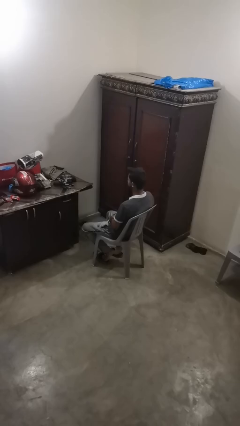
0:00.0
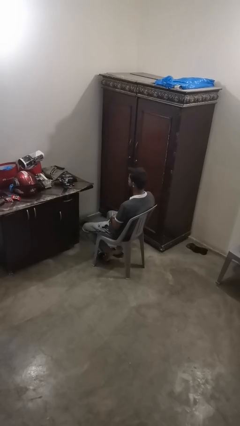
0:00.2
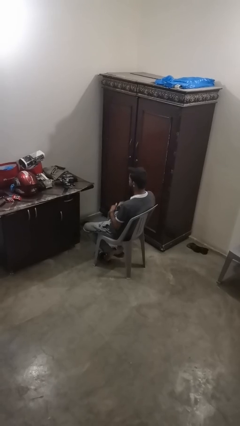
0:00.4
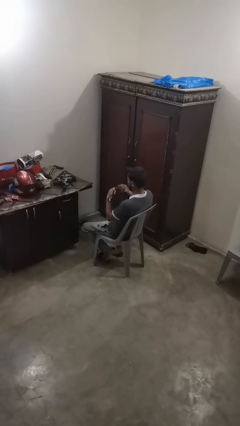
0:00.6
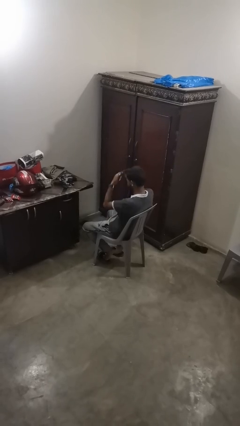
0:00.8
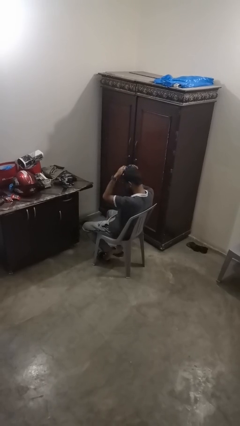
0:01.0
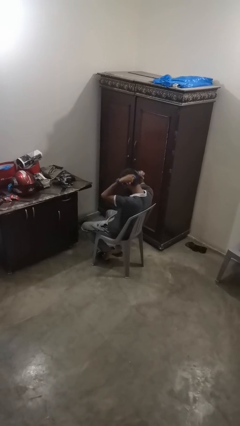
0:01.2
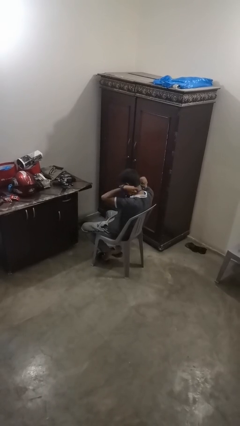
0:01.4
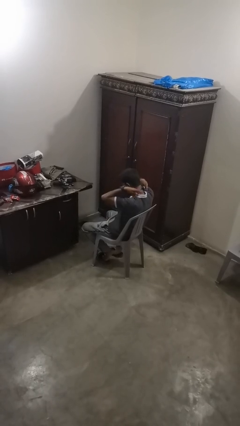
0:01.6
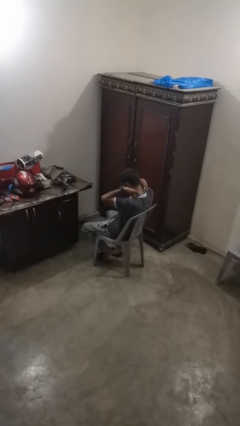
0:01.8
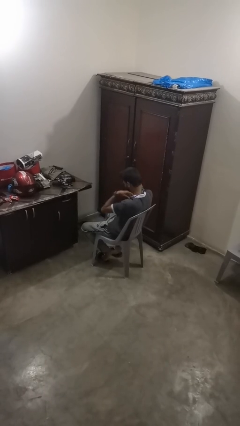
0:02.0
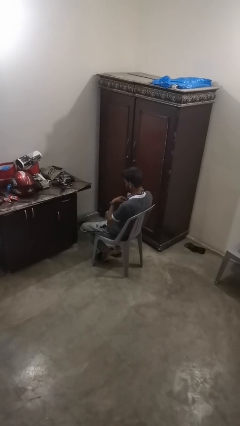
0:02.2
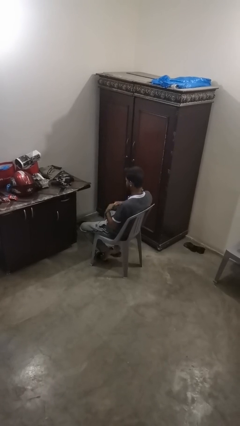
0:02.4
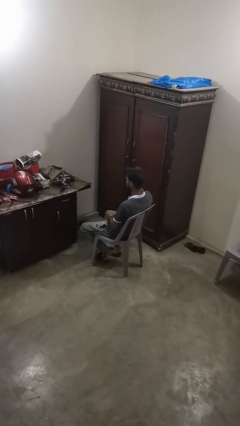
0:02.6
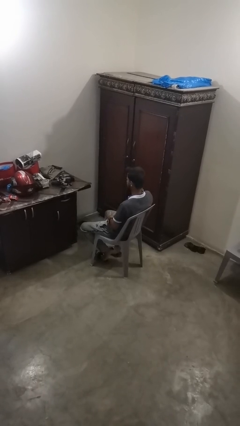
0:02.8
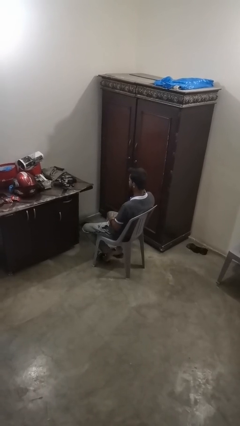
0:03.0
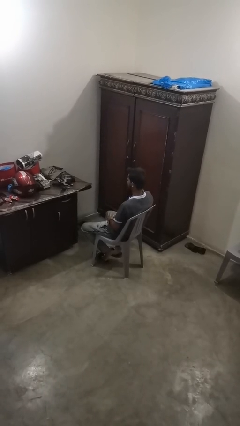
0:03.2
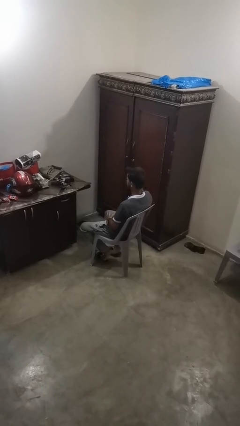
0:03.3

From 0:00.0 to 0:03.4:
person puts on necklace

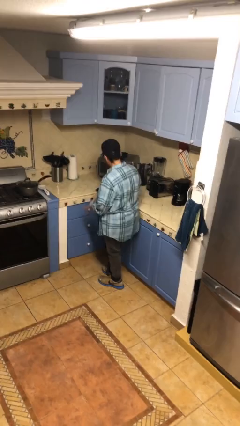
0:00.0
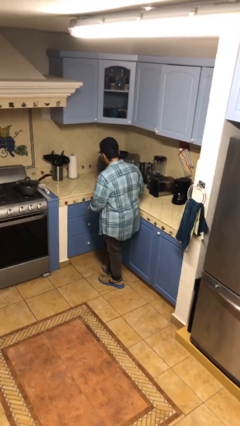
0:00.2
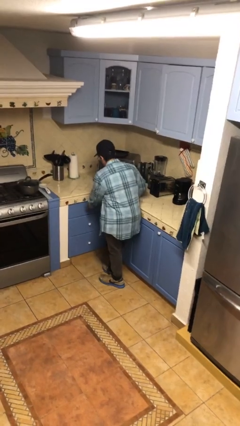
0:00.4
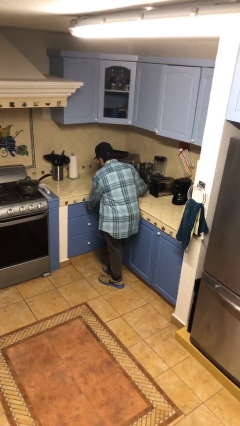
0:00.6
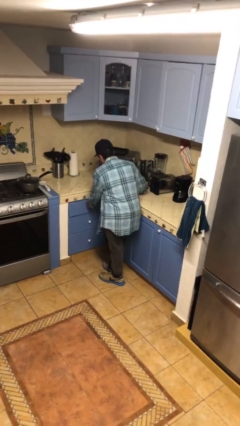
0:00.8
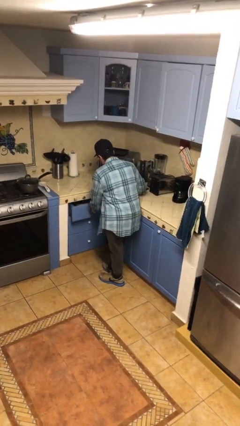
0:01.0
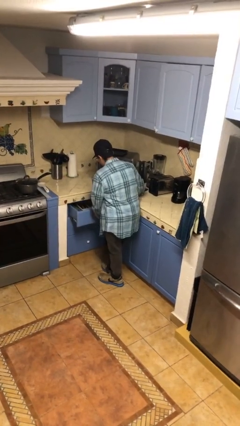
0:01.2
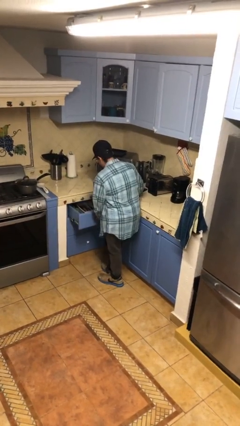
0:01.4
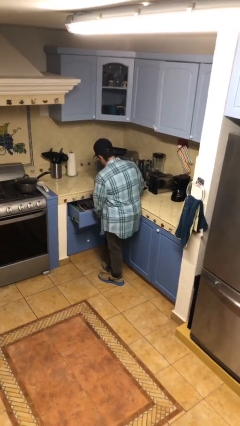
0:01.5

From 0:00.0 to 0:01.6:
person opens kitchen drawer

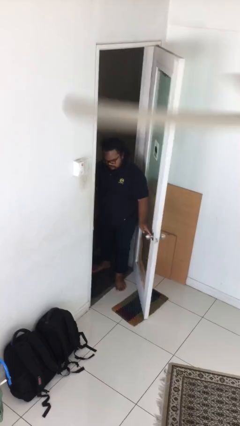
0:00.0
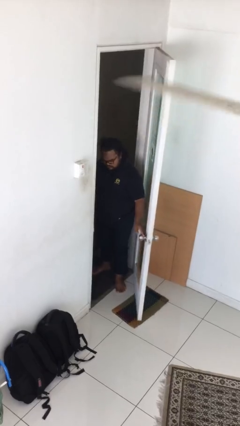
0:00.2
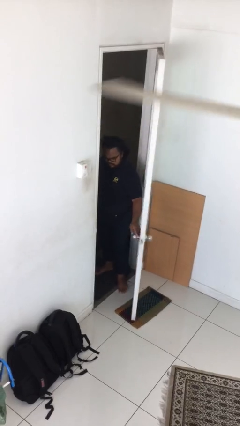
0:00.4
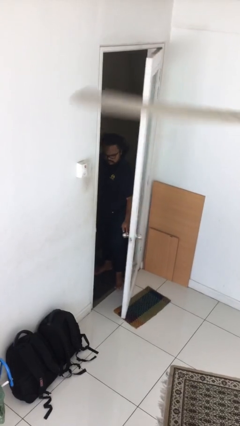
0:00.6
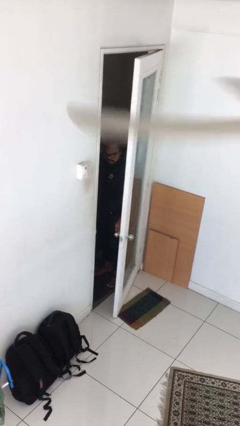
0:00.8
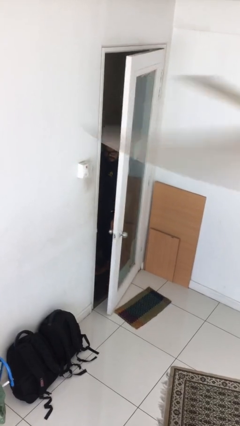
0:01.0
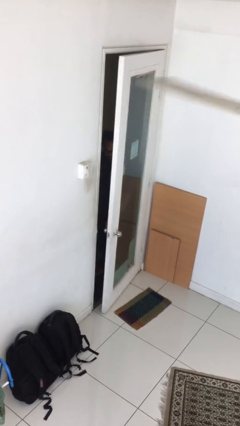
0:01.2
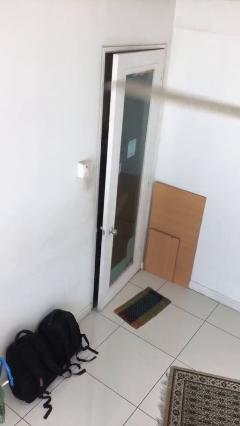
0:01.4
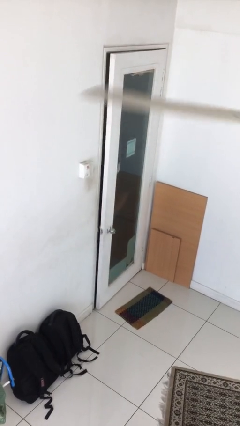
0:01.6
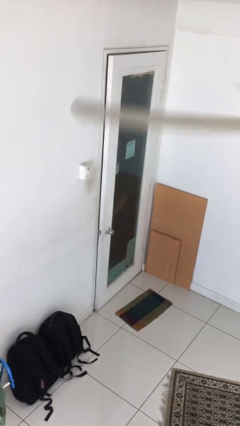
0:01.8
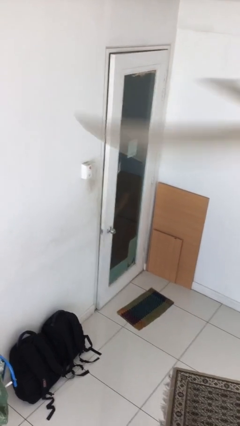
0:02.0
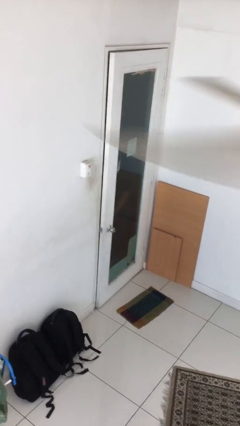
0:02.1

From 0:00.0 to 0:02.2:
person closes facility door

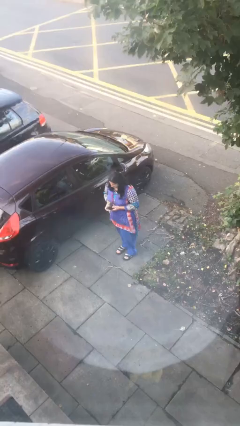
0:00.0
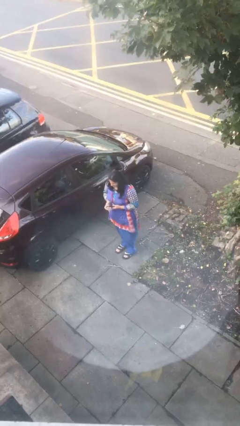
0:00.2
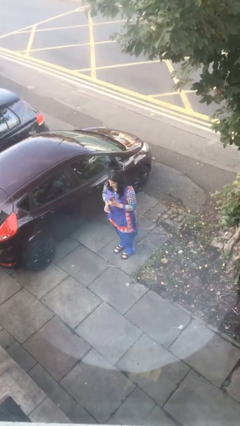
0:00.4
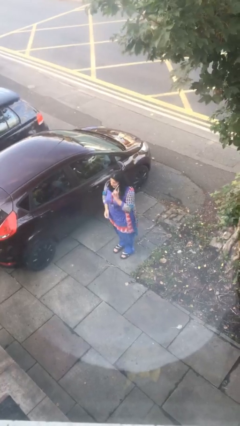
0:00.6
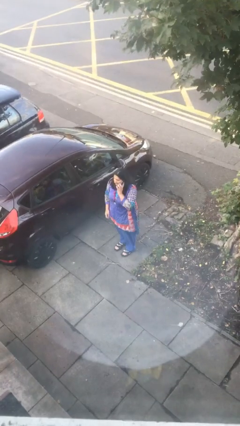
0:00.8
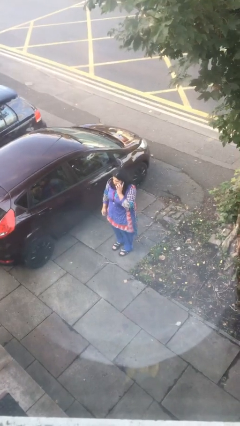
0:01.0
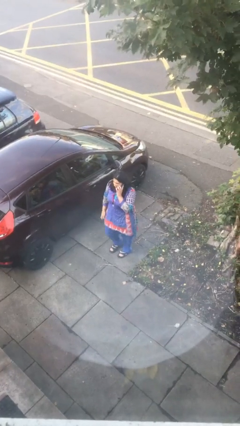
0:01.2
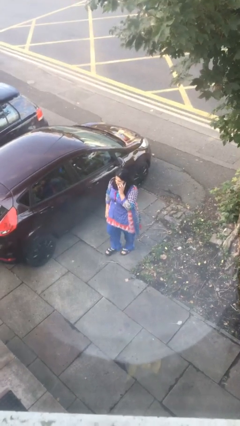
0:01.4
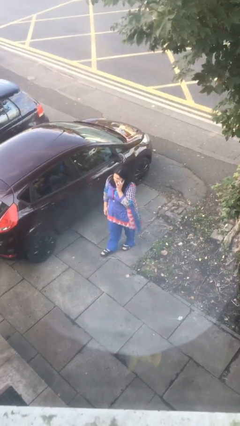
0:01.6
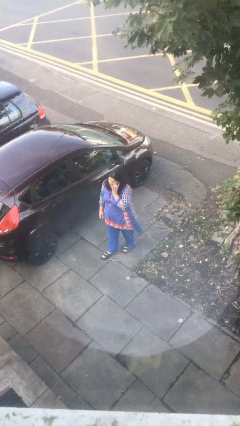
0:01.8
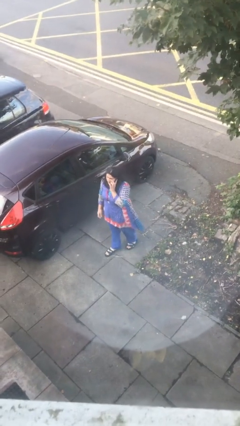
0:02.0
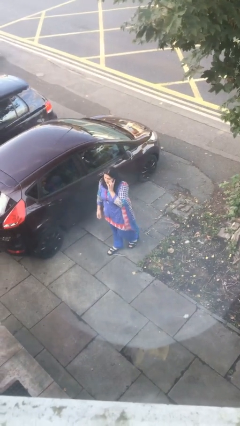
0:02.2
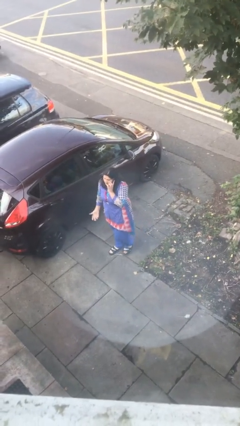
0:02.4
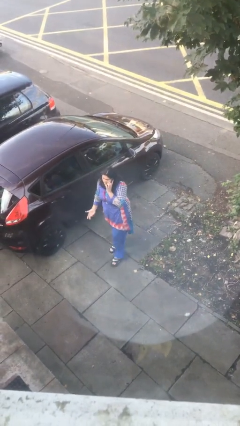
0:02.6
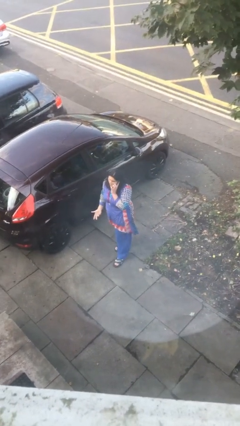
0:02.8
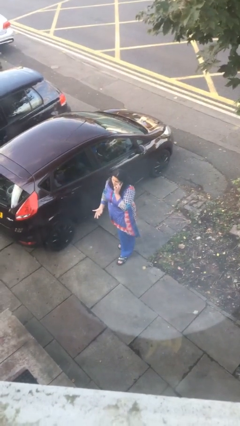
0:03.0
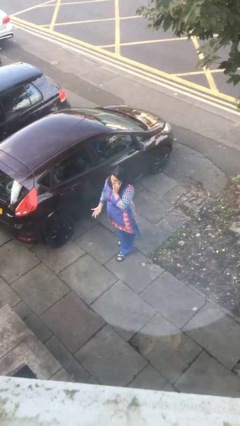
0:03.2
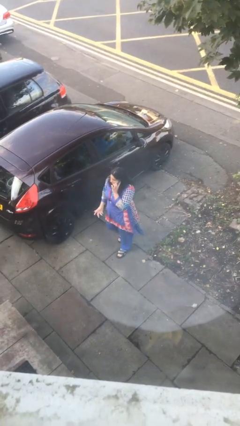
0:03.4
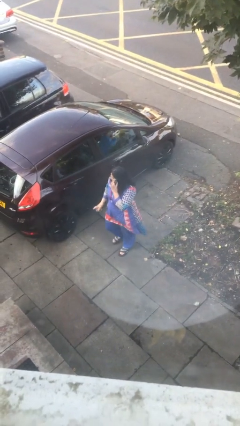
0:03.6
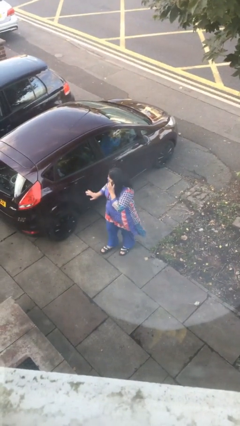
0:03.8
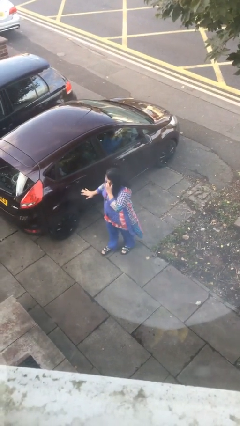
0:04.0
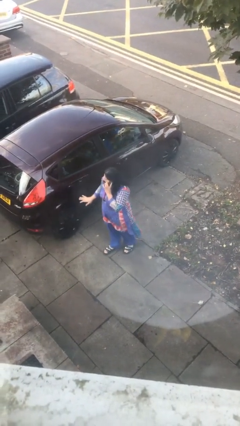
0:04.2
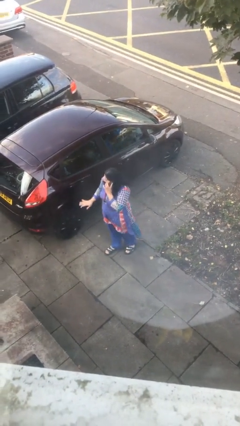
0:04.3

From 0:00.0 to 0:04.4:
person talks on phone

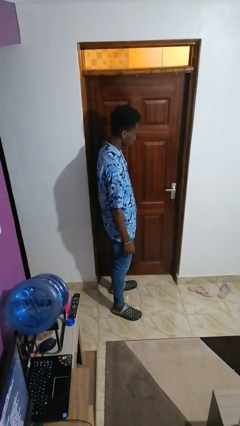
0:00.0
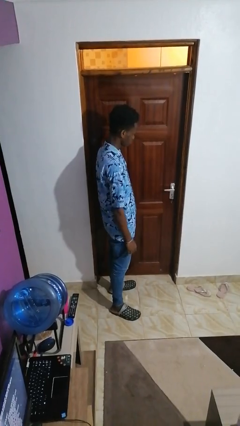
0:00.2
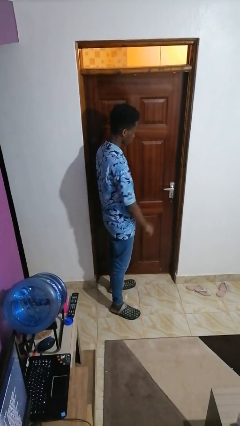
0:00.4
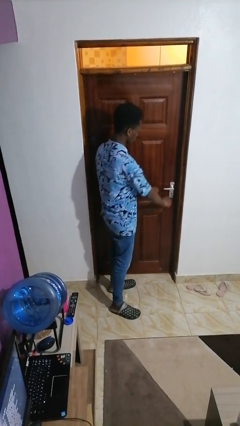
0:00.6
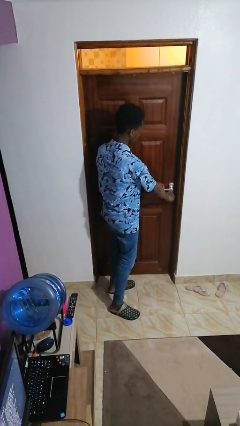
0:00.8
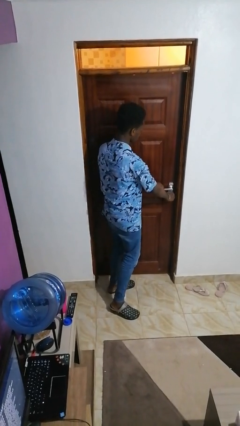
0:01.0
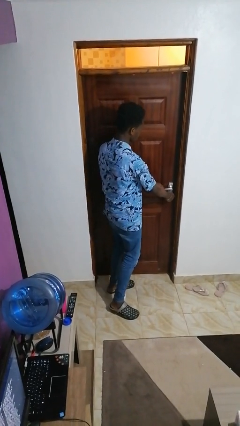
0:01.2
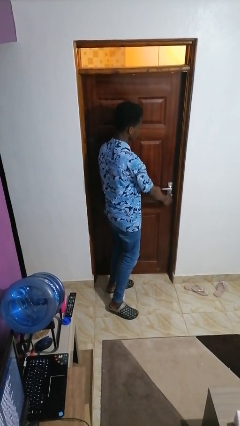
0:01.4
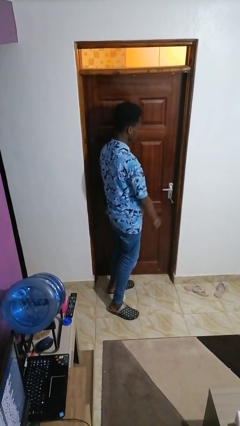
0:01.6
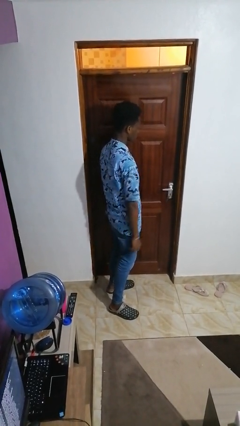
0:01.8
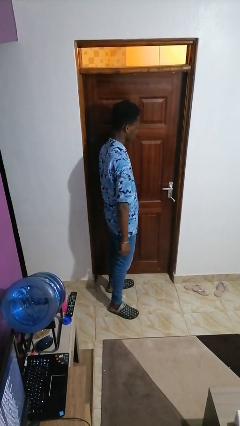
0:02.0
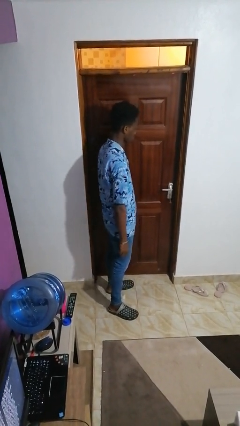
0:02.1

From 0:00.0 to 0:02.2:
person locks door with keys

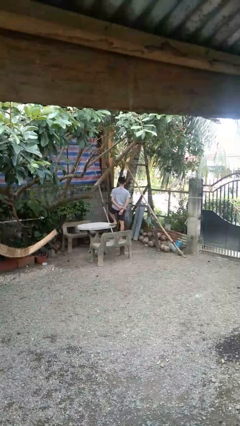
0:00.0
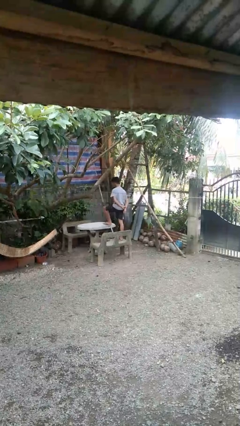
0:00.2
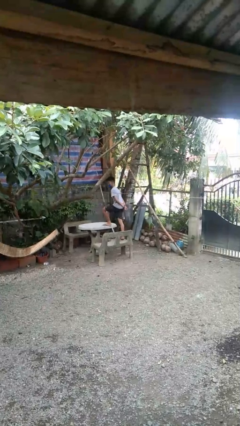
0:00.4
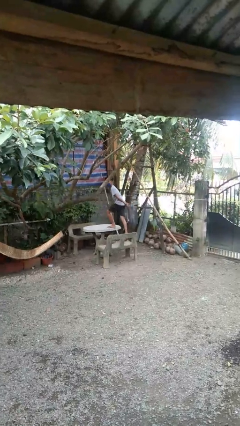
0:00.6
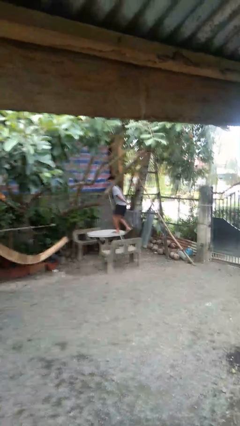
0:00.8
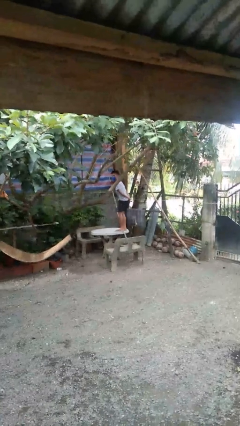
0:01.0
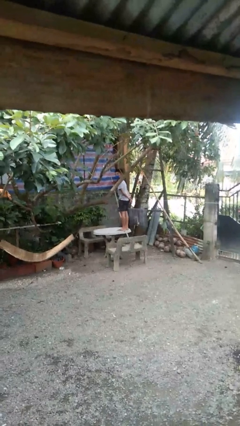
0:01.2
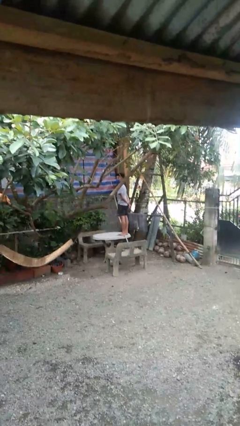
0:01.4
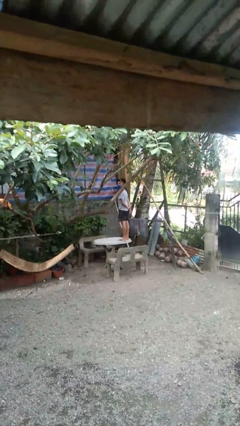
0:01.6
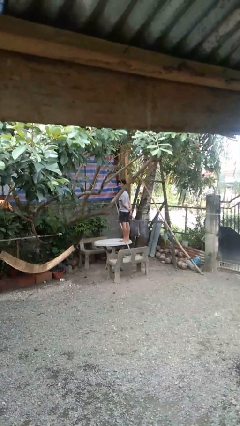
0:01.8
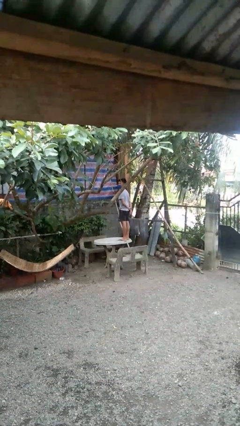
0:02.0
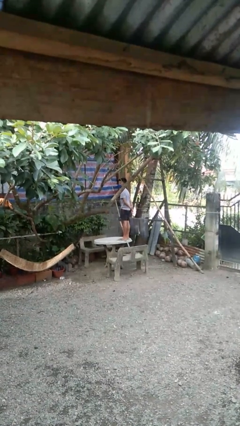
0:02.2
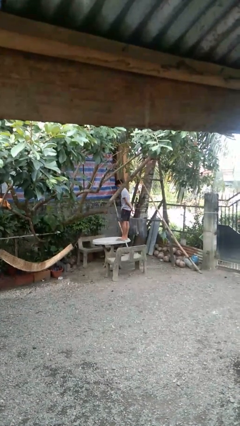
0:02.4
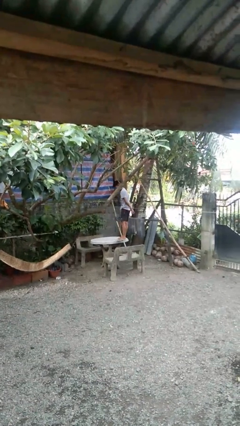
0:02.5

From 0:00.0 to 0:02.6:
person climbs on table

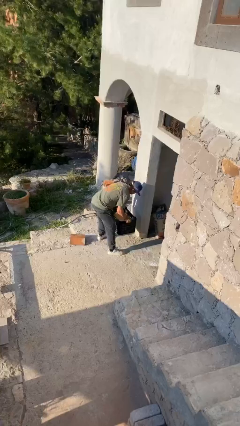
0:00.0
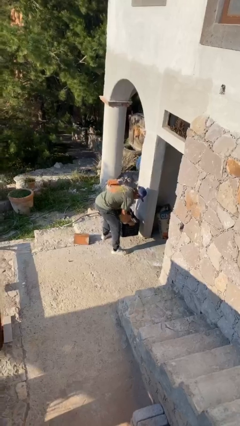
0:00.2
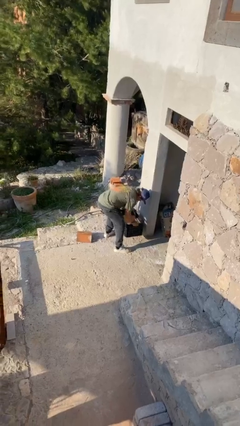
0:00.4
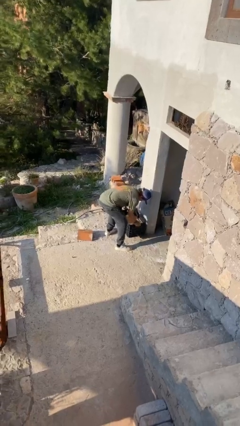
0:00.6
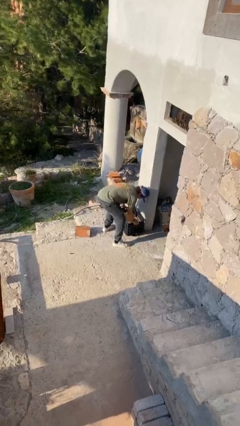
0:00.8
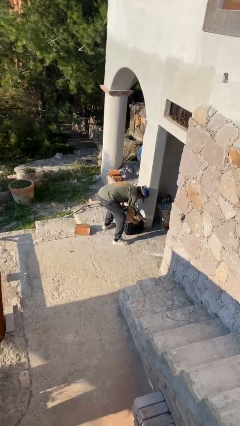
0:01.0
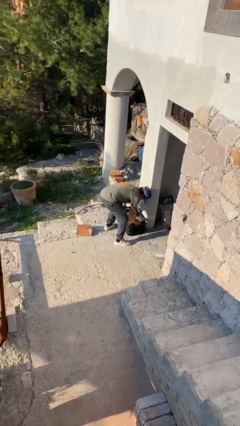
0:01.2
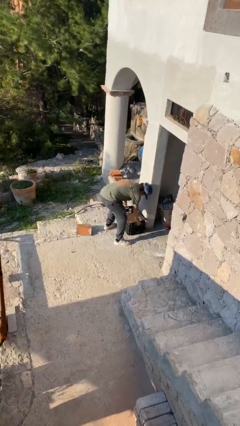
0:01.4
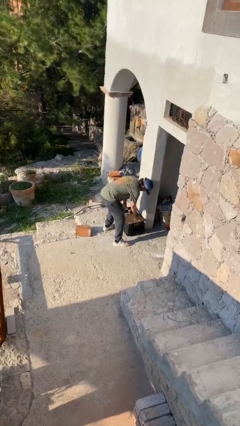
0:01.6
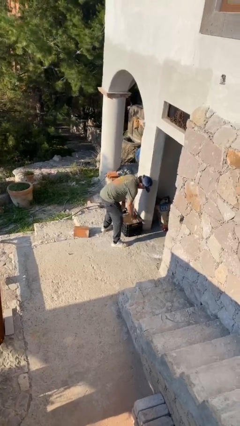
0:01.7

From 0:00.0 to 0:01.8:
person puts down object on floor
